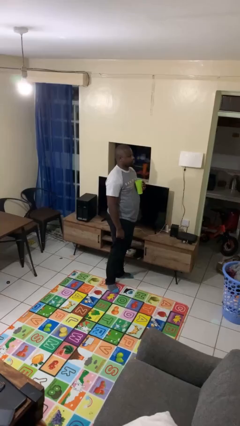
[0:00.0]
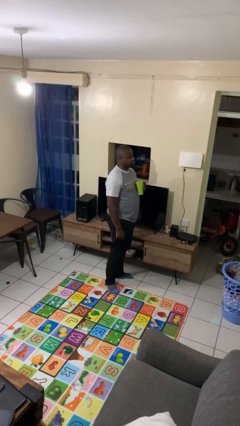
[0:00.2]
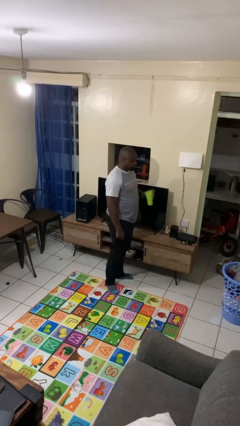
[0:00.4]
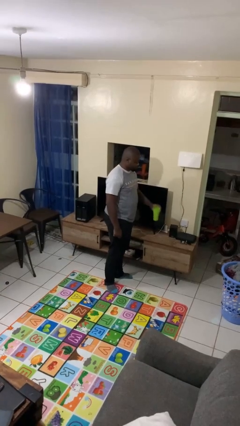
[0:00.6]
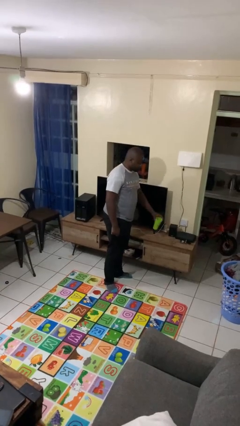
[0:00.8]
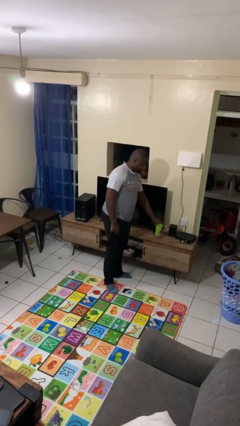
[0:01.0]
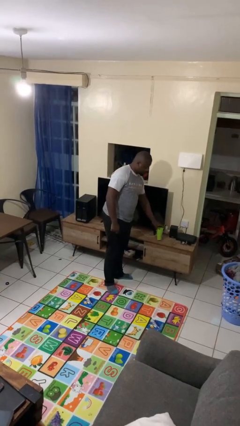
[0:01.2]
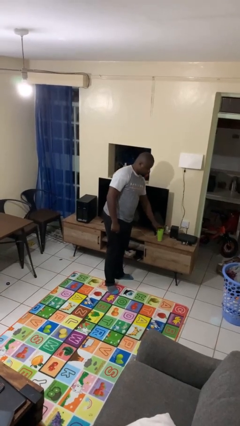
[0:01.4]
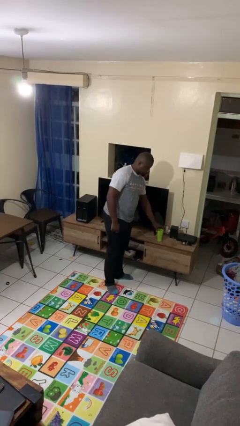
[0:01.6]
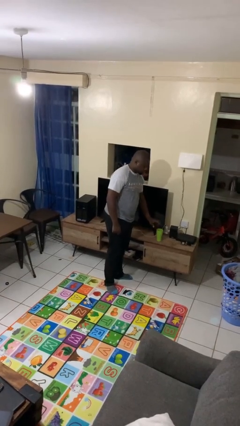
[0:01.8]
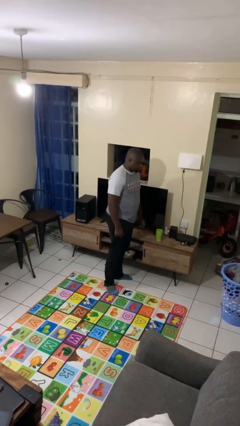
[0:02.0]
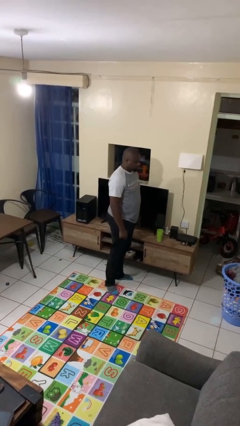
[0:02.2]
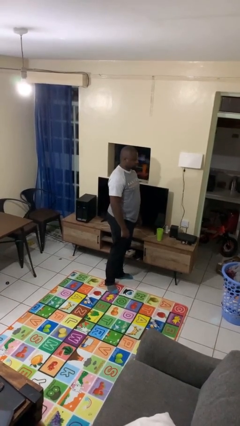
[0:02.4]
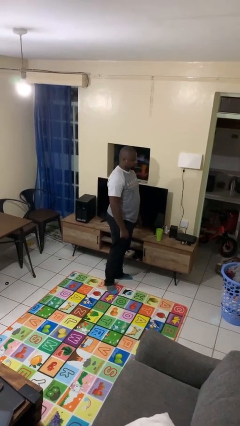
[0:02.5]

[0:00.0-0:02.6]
person puts down object on countertop

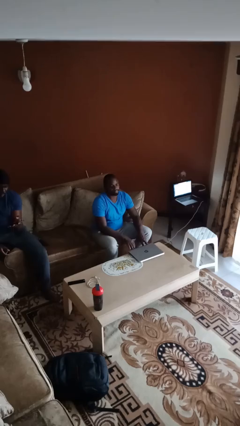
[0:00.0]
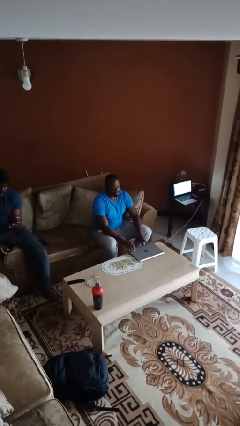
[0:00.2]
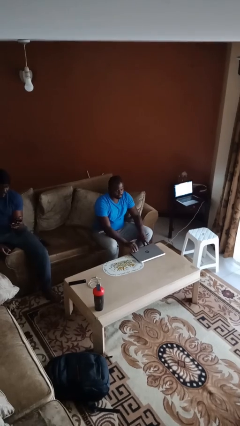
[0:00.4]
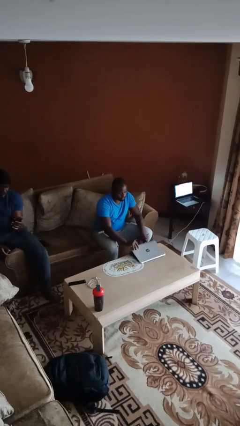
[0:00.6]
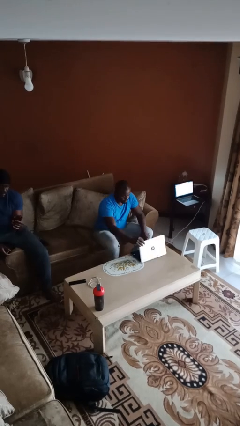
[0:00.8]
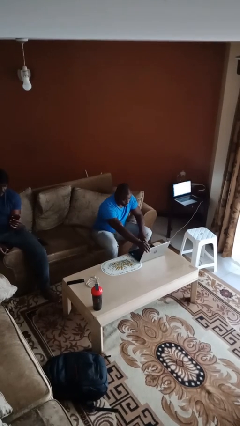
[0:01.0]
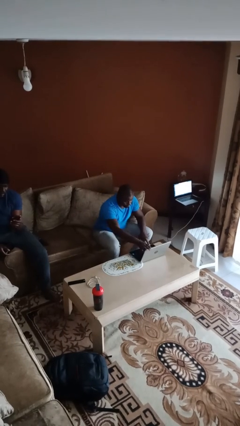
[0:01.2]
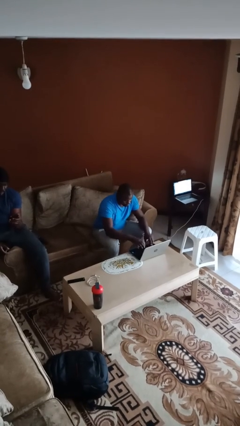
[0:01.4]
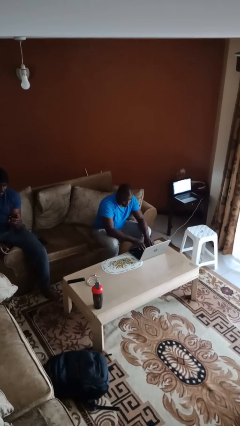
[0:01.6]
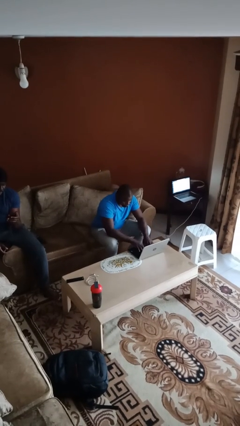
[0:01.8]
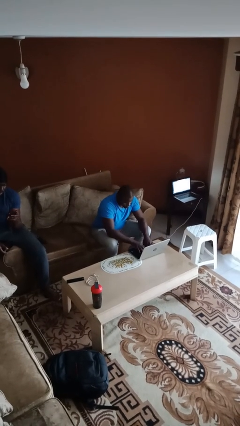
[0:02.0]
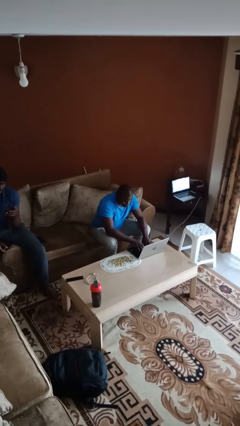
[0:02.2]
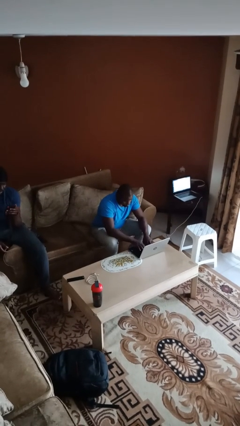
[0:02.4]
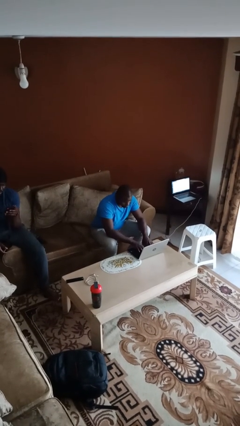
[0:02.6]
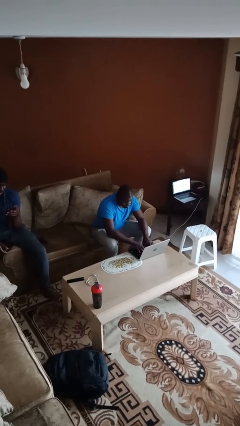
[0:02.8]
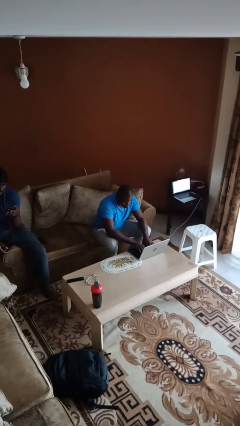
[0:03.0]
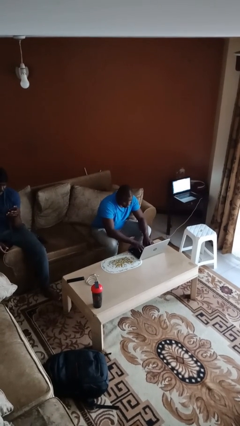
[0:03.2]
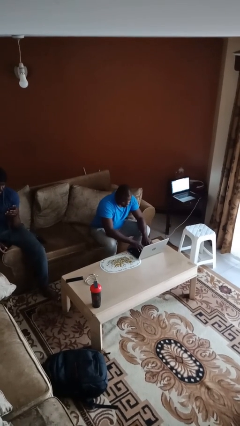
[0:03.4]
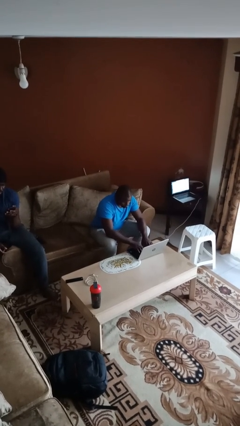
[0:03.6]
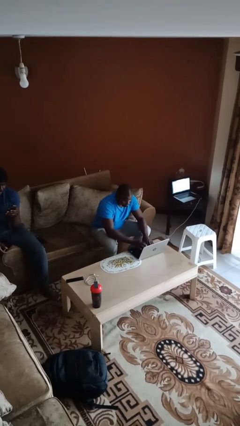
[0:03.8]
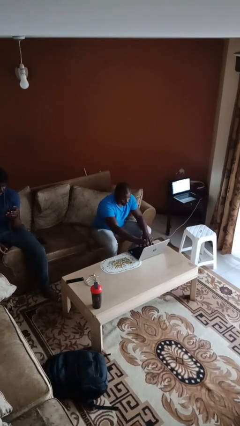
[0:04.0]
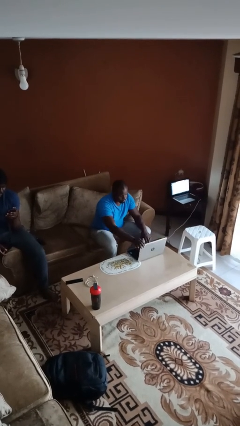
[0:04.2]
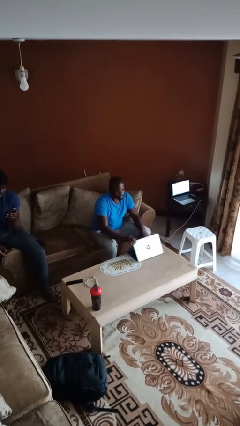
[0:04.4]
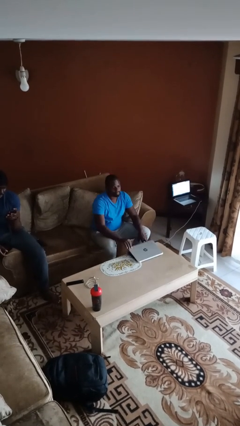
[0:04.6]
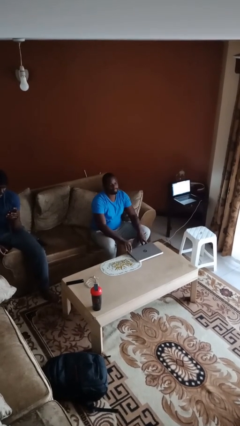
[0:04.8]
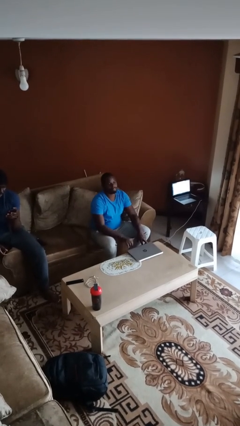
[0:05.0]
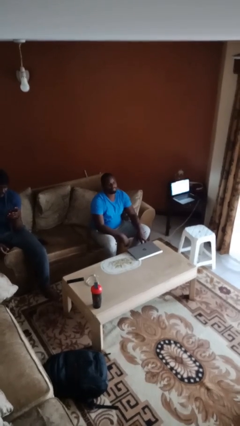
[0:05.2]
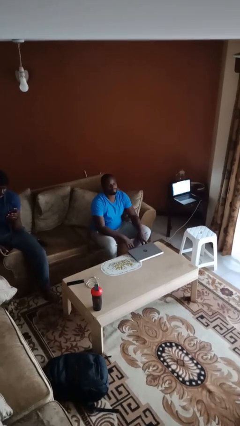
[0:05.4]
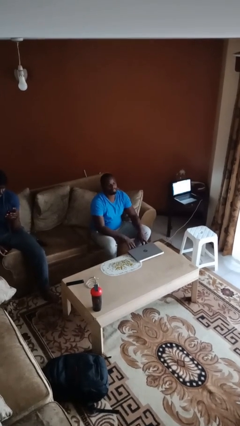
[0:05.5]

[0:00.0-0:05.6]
person interacts with laptop

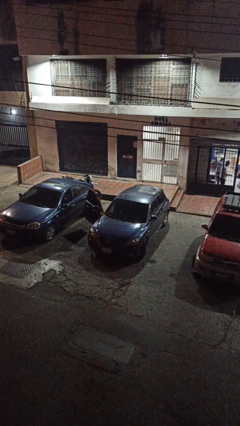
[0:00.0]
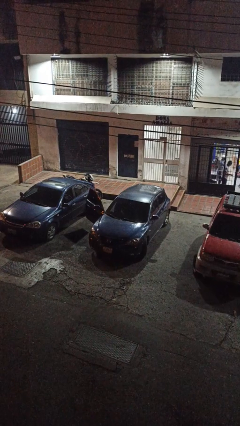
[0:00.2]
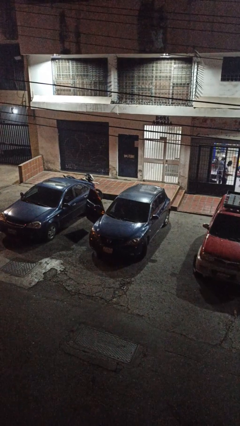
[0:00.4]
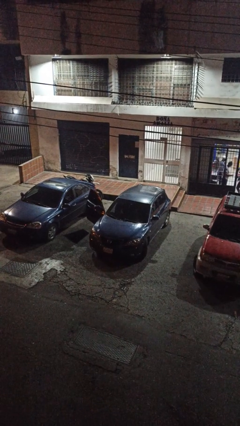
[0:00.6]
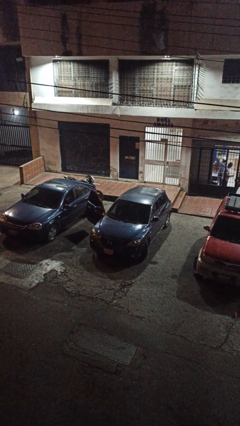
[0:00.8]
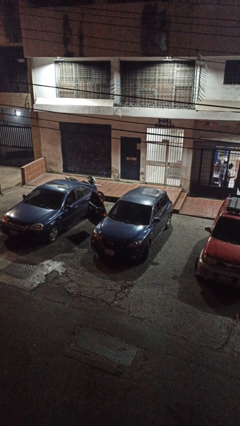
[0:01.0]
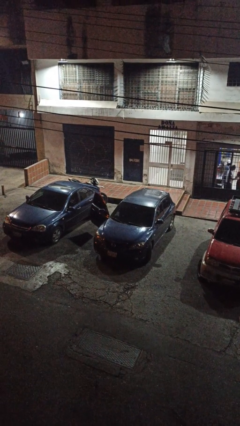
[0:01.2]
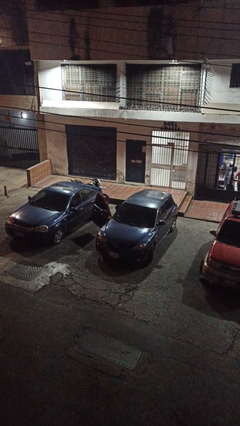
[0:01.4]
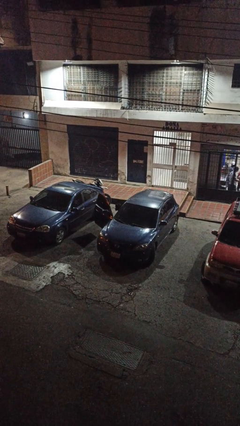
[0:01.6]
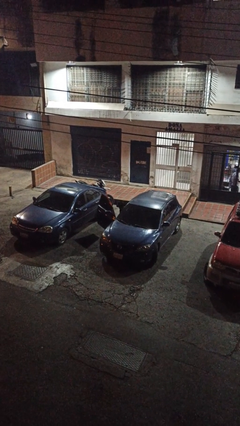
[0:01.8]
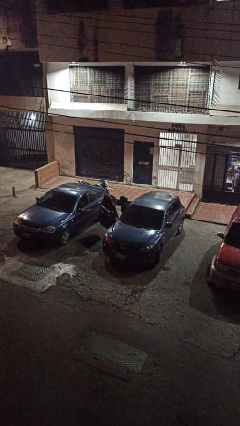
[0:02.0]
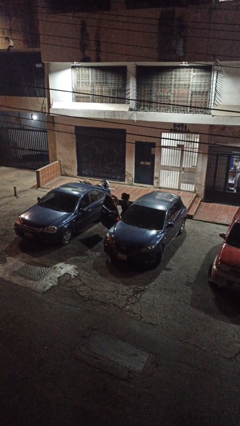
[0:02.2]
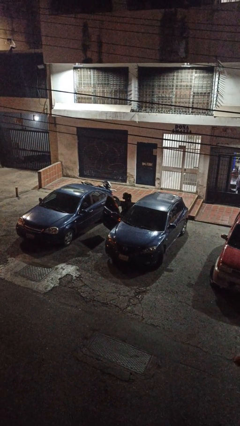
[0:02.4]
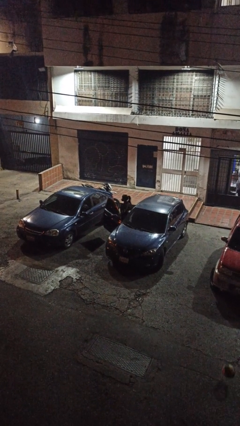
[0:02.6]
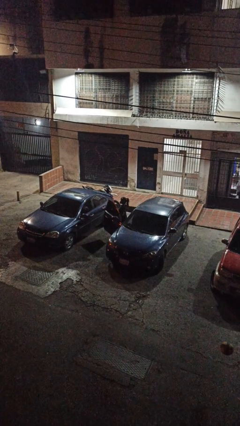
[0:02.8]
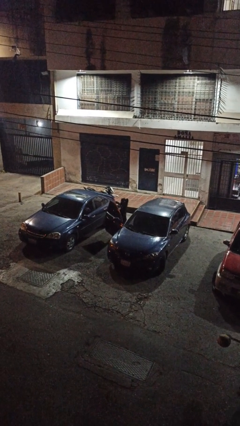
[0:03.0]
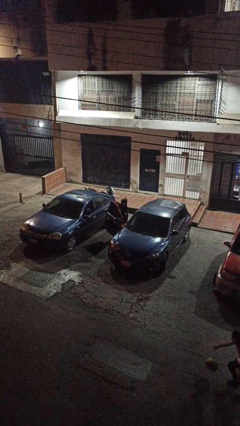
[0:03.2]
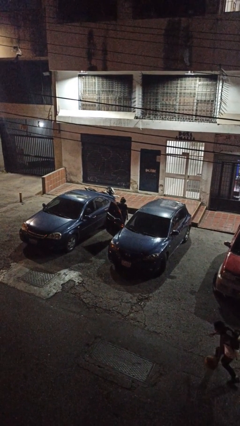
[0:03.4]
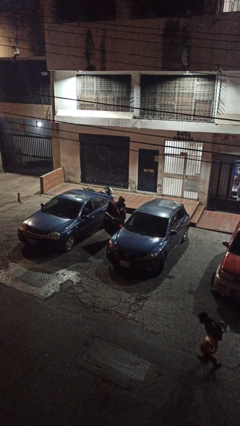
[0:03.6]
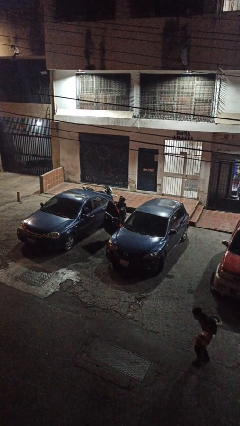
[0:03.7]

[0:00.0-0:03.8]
person exits car

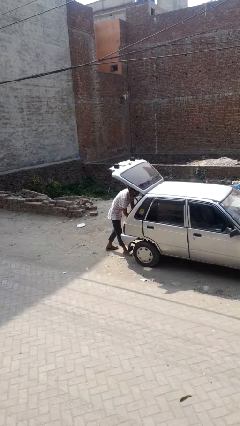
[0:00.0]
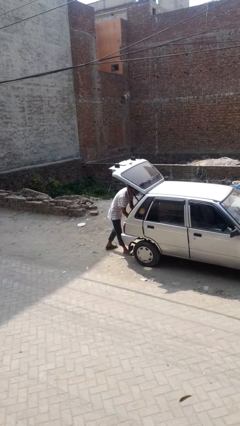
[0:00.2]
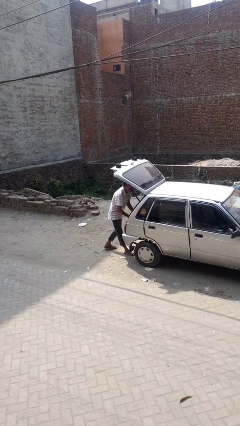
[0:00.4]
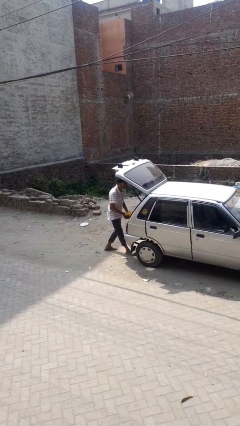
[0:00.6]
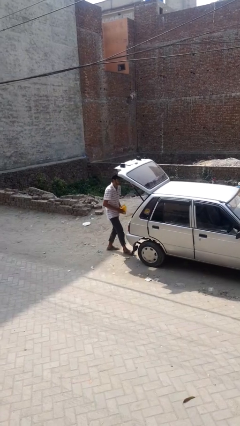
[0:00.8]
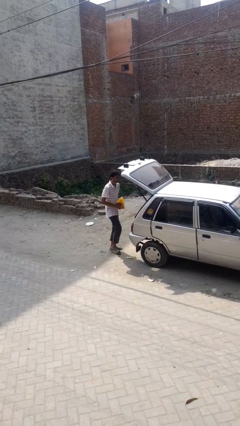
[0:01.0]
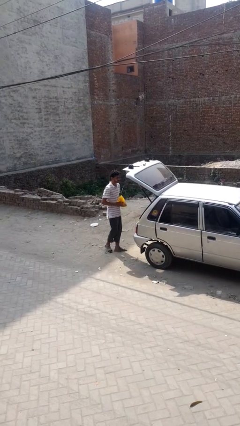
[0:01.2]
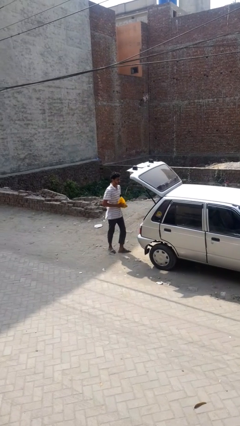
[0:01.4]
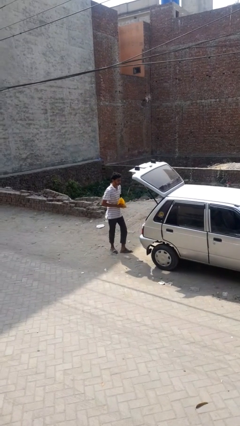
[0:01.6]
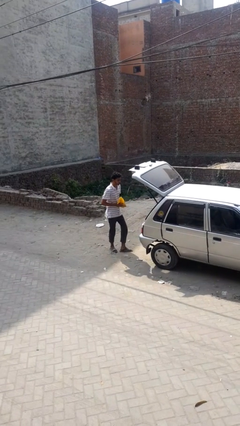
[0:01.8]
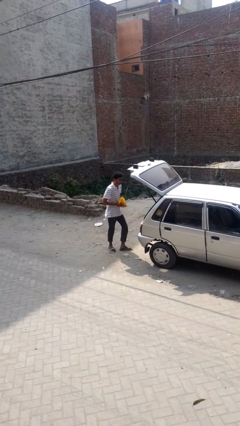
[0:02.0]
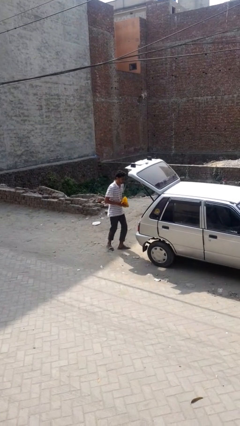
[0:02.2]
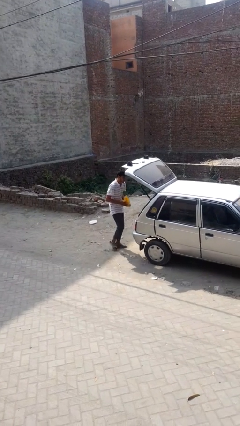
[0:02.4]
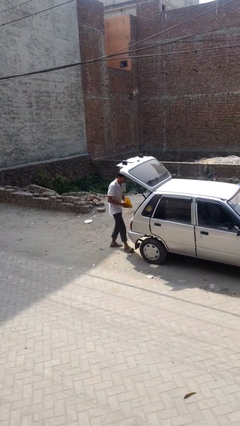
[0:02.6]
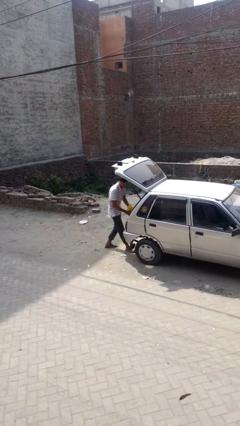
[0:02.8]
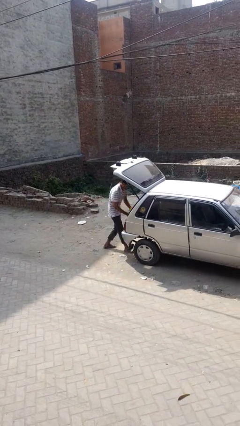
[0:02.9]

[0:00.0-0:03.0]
person unloads car

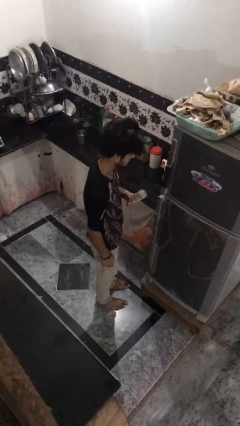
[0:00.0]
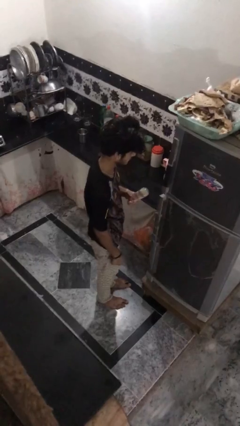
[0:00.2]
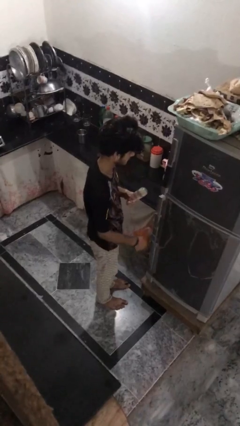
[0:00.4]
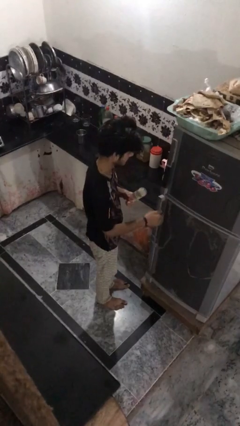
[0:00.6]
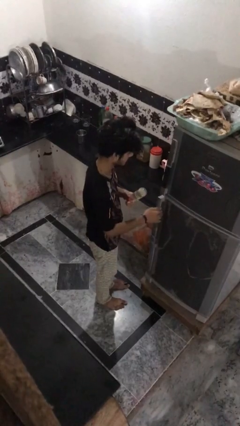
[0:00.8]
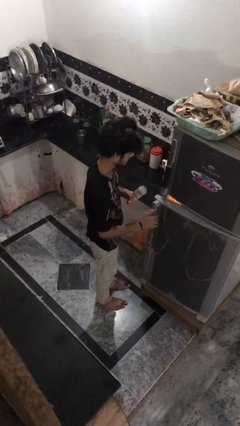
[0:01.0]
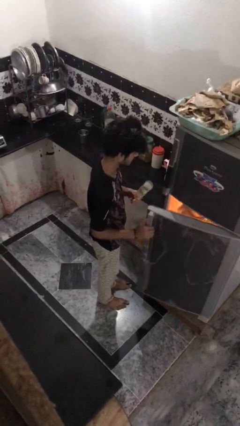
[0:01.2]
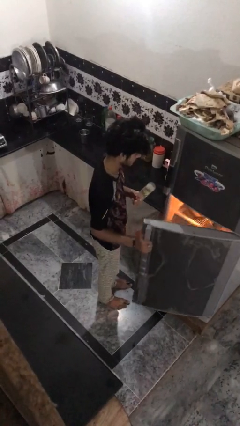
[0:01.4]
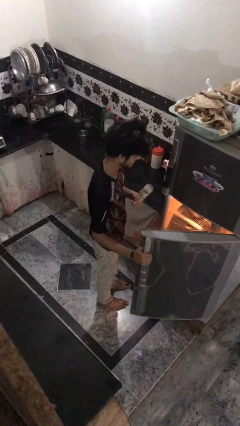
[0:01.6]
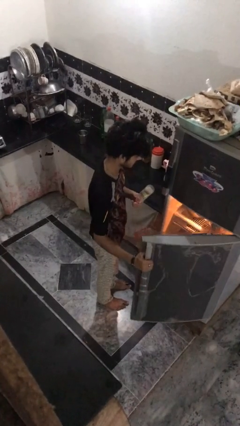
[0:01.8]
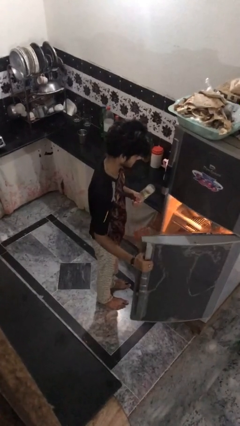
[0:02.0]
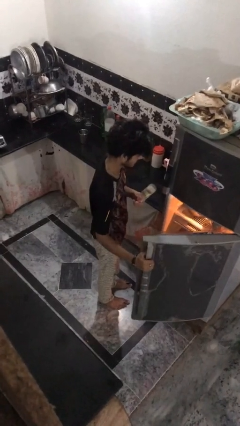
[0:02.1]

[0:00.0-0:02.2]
person opens refrigerator

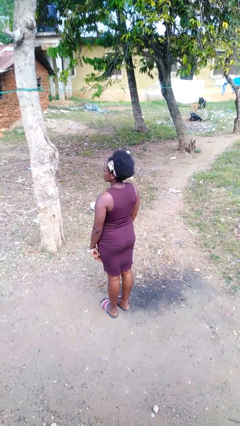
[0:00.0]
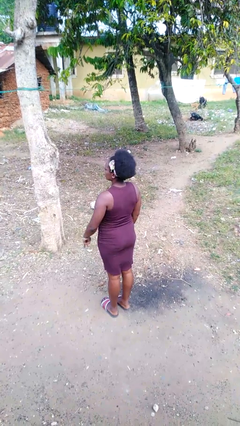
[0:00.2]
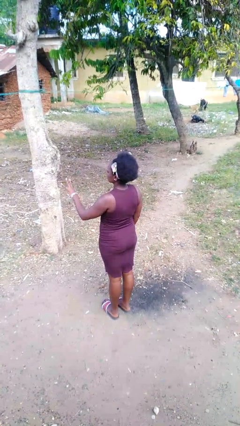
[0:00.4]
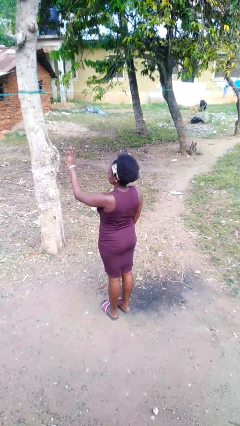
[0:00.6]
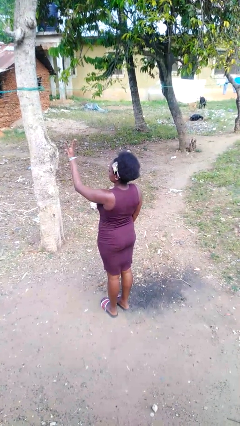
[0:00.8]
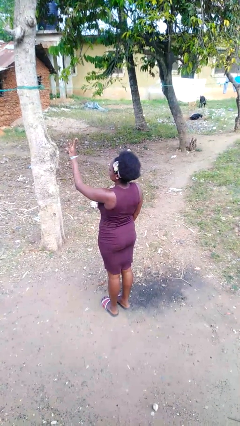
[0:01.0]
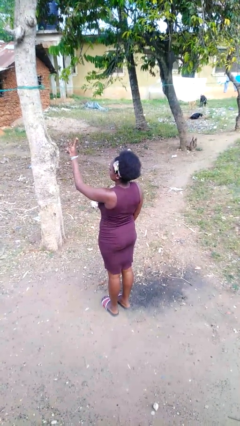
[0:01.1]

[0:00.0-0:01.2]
person gestures number three
